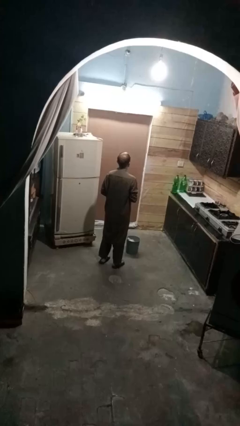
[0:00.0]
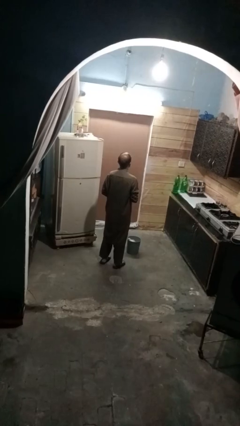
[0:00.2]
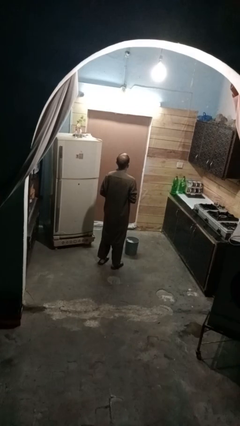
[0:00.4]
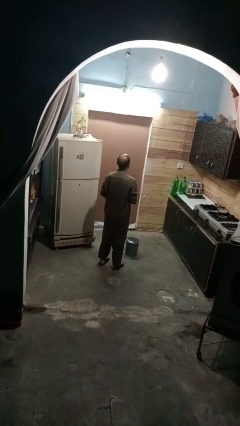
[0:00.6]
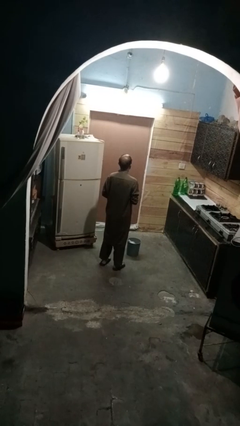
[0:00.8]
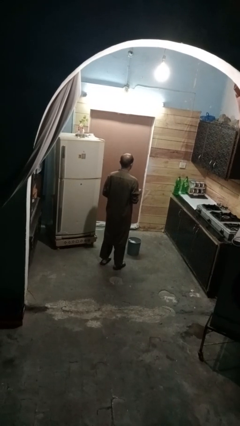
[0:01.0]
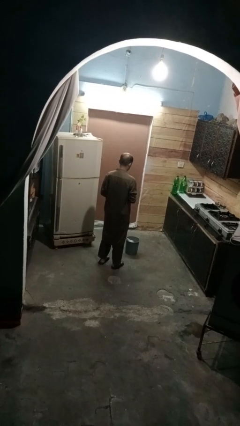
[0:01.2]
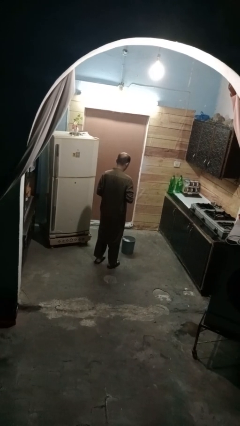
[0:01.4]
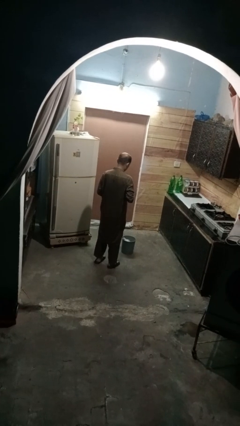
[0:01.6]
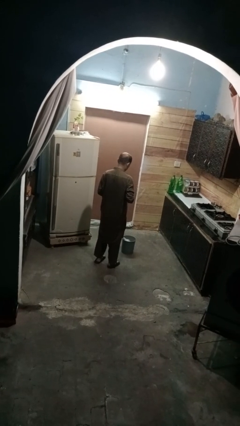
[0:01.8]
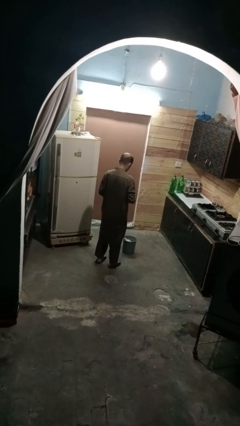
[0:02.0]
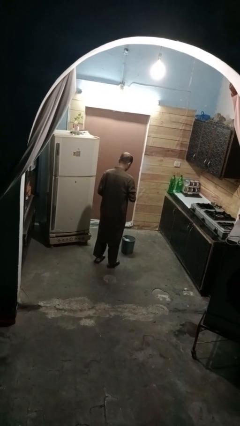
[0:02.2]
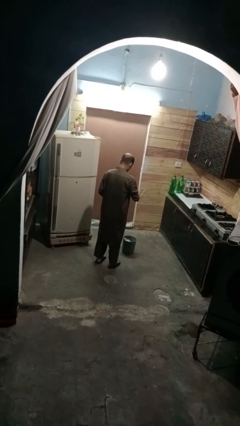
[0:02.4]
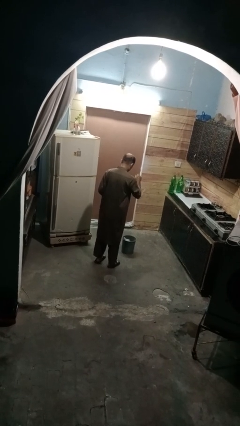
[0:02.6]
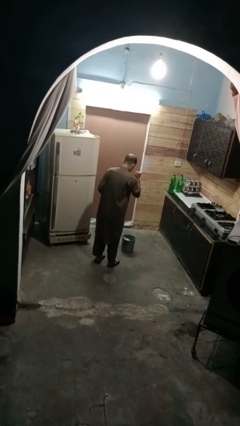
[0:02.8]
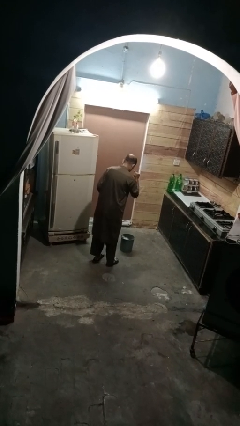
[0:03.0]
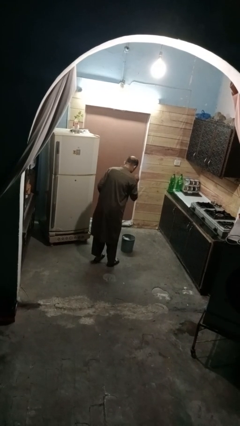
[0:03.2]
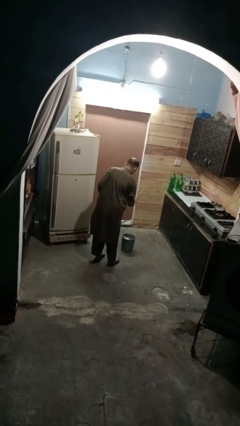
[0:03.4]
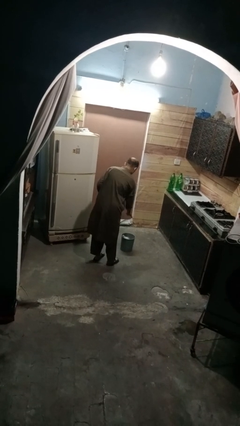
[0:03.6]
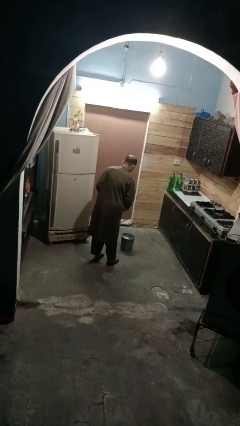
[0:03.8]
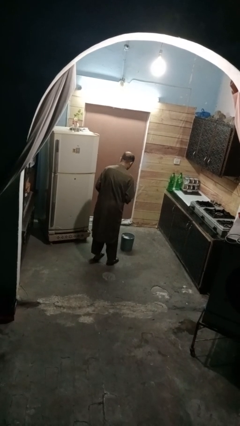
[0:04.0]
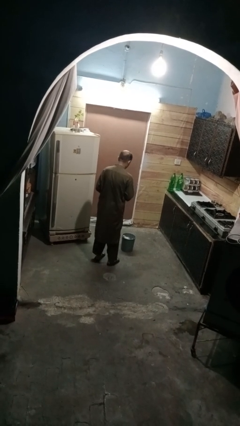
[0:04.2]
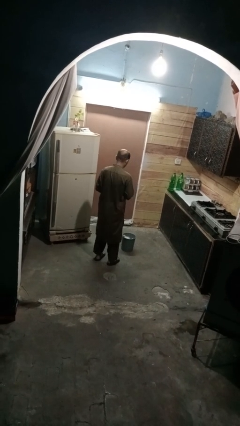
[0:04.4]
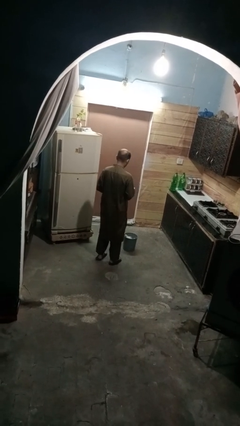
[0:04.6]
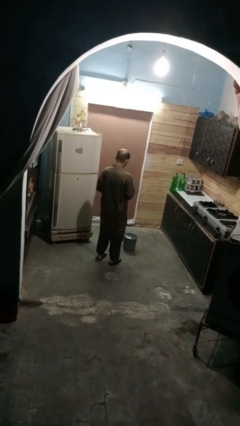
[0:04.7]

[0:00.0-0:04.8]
person discards trash

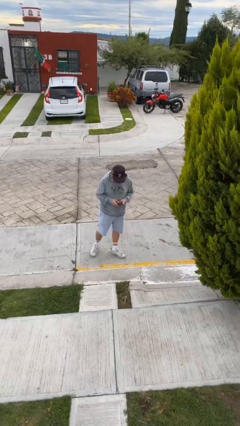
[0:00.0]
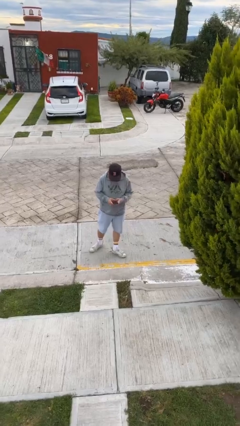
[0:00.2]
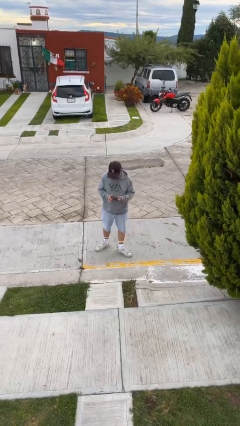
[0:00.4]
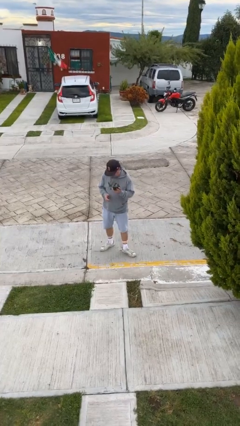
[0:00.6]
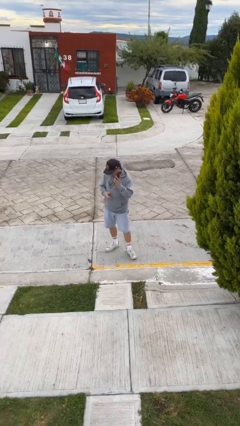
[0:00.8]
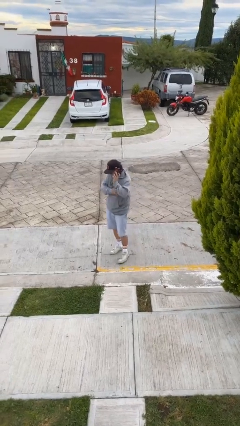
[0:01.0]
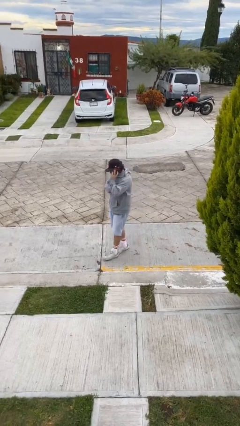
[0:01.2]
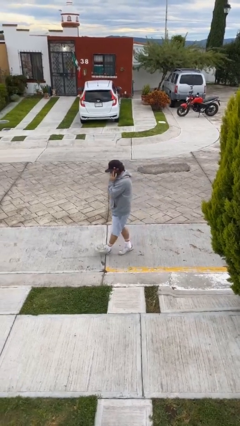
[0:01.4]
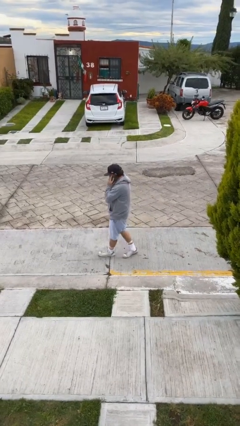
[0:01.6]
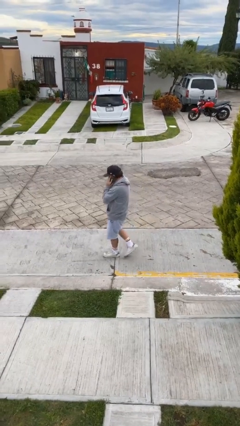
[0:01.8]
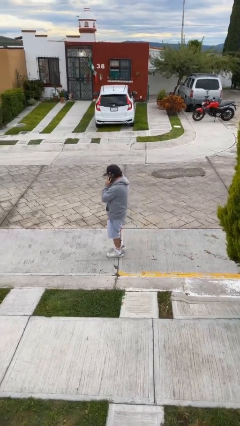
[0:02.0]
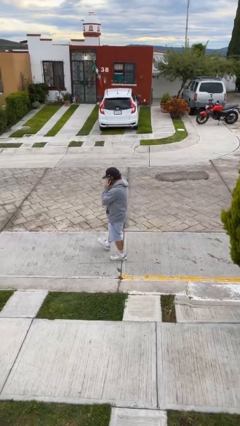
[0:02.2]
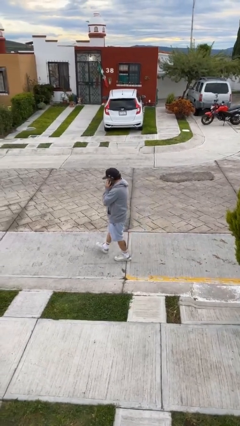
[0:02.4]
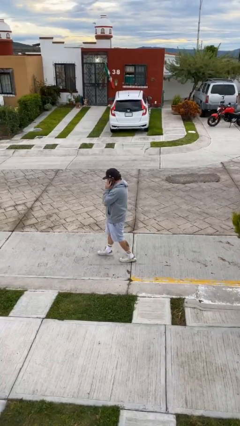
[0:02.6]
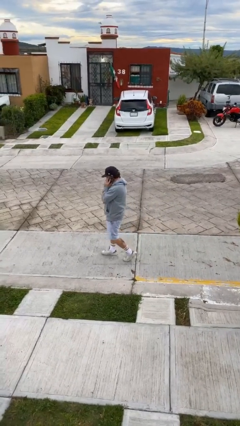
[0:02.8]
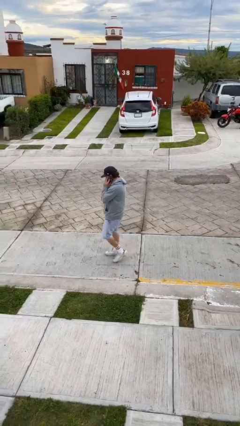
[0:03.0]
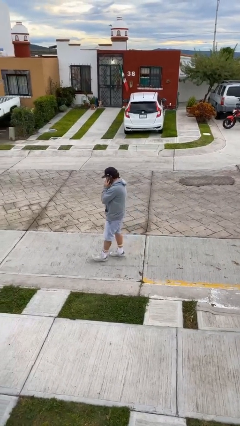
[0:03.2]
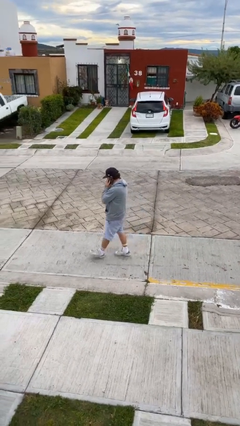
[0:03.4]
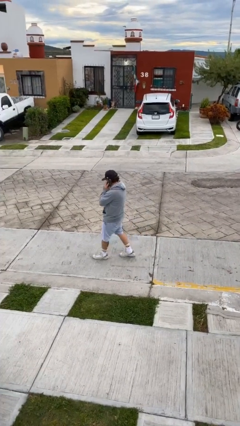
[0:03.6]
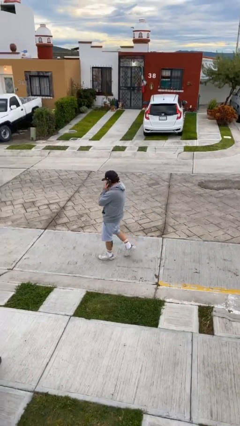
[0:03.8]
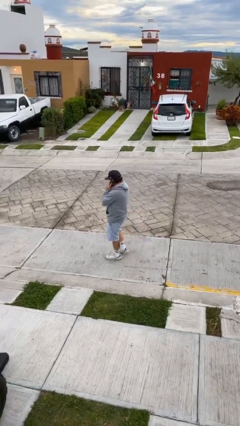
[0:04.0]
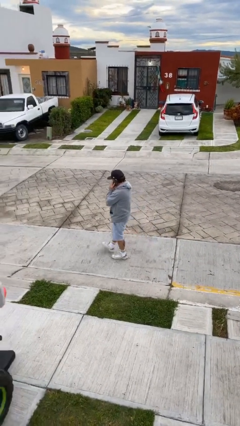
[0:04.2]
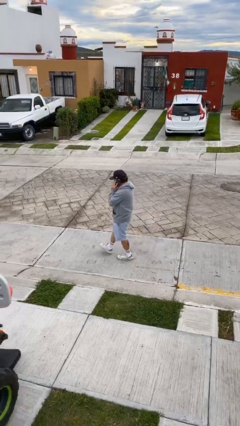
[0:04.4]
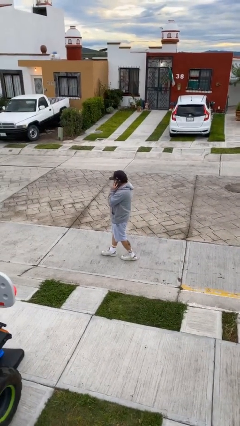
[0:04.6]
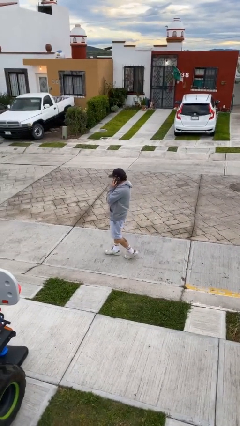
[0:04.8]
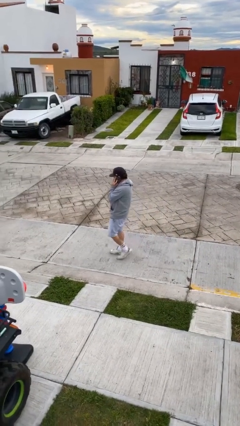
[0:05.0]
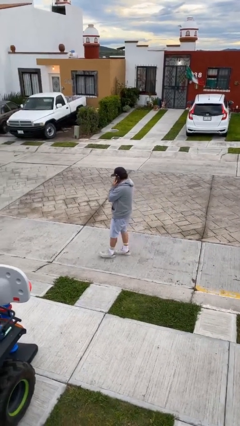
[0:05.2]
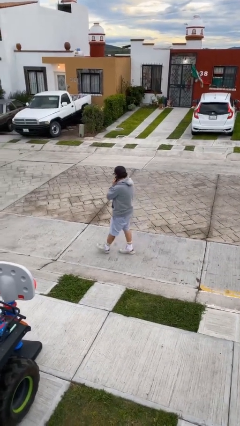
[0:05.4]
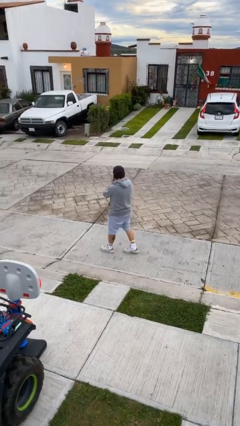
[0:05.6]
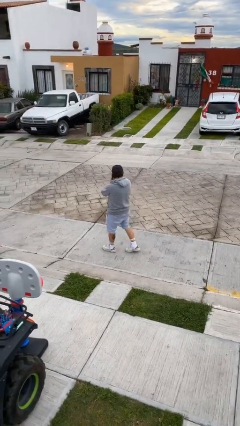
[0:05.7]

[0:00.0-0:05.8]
person talks on phone

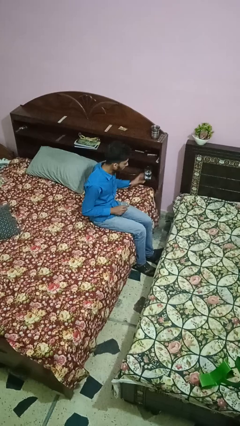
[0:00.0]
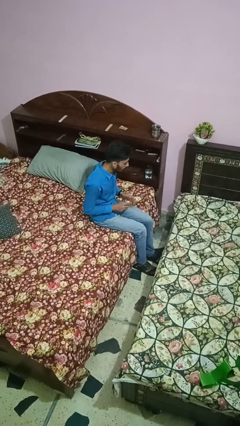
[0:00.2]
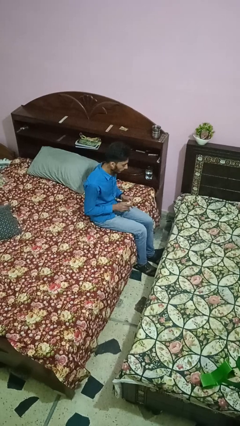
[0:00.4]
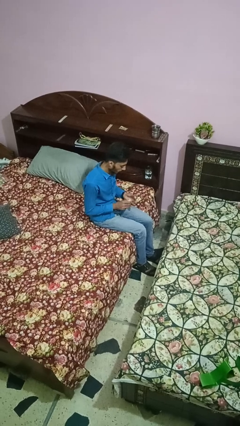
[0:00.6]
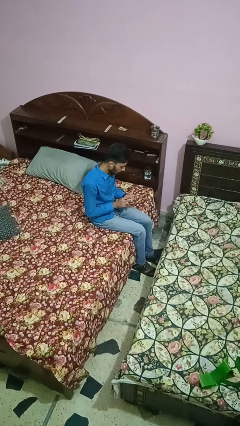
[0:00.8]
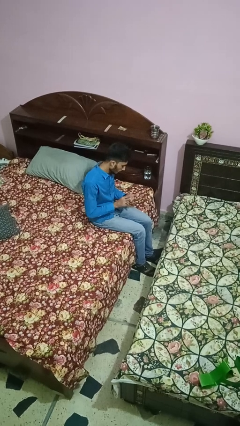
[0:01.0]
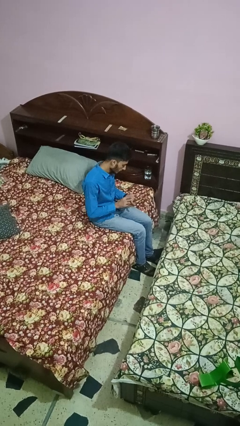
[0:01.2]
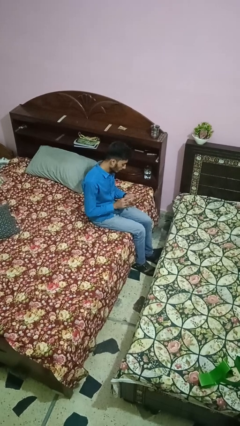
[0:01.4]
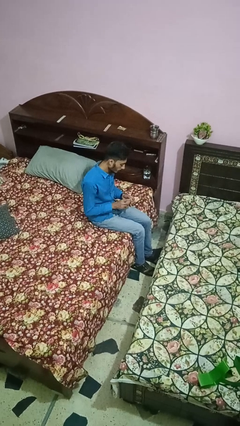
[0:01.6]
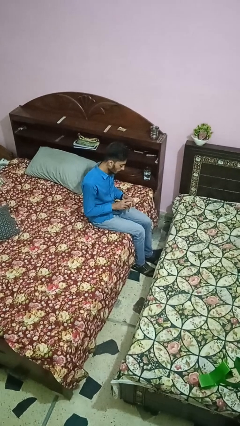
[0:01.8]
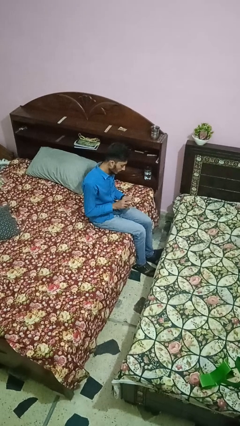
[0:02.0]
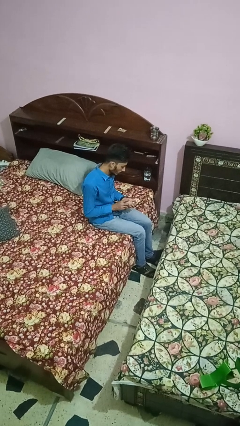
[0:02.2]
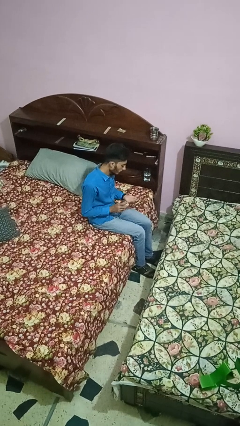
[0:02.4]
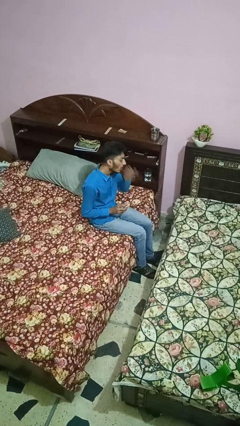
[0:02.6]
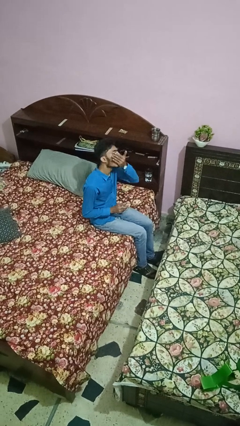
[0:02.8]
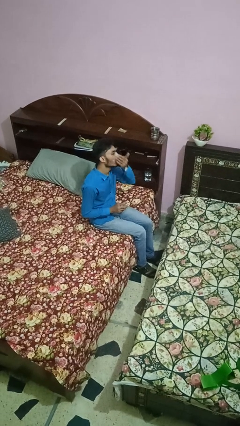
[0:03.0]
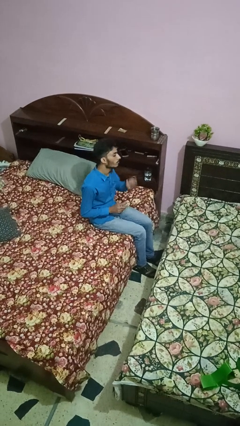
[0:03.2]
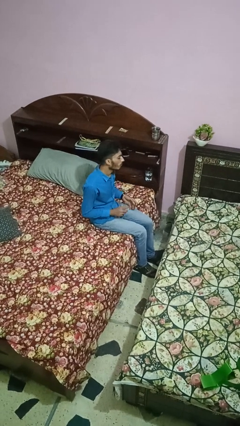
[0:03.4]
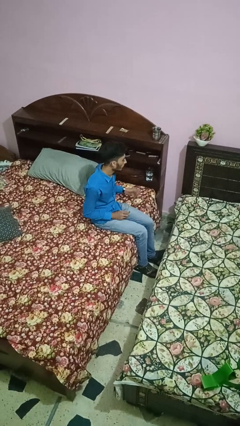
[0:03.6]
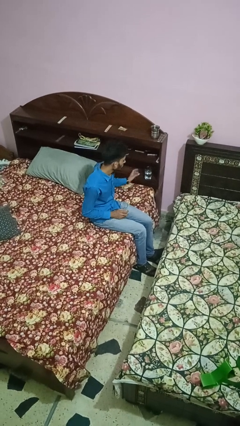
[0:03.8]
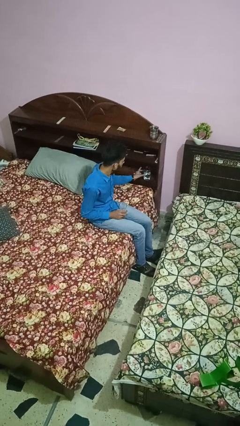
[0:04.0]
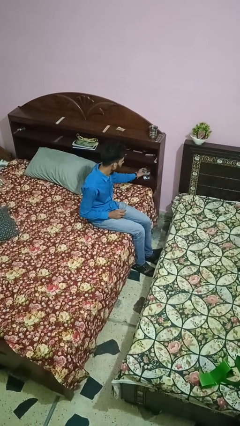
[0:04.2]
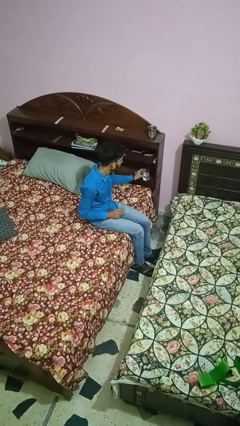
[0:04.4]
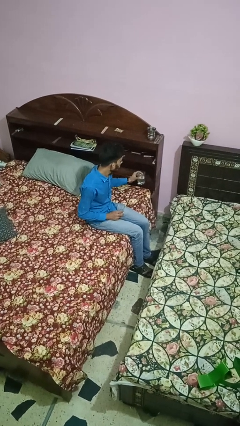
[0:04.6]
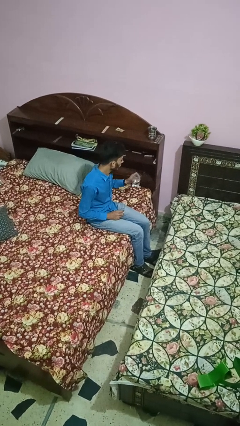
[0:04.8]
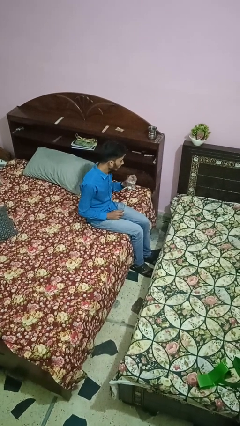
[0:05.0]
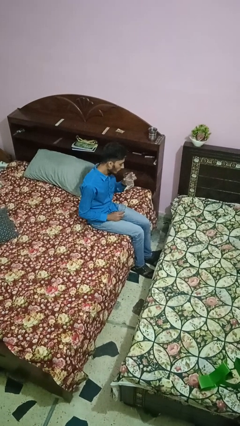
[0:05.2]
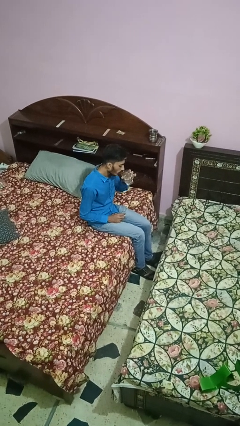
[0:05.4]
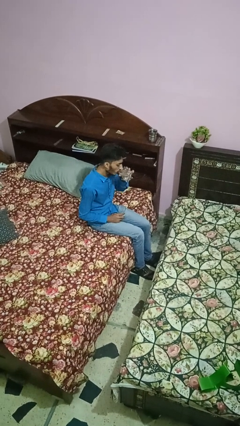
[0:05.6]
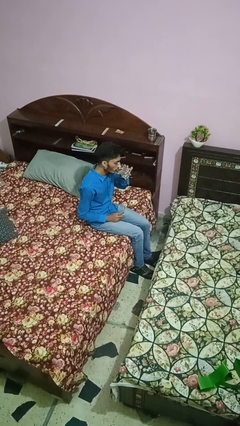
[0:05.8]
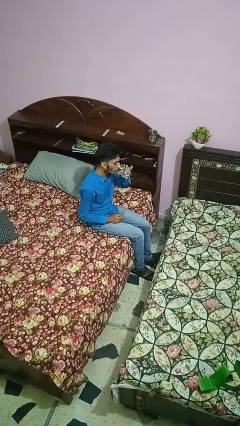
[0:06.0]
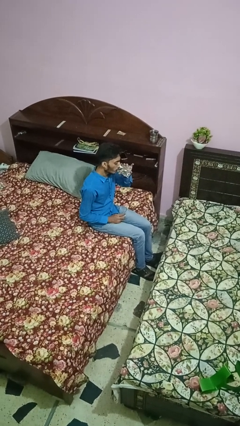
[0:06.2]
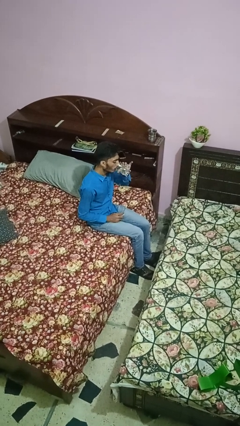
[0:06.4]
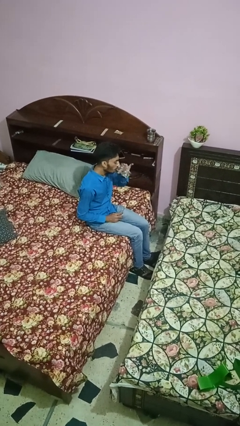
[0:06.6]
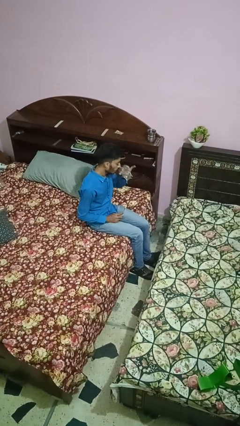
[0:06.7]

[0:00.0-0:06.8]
person takes medicine pills

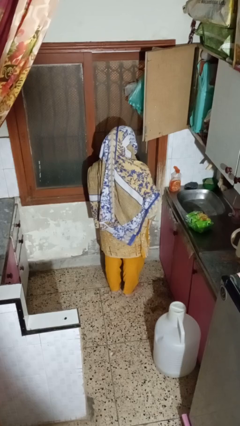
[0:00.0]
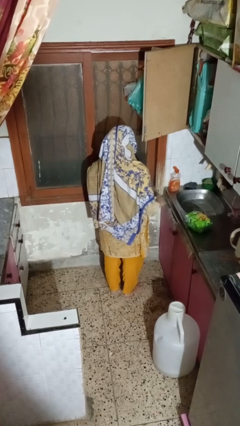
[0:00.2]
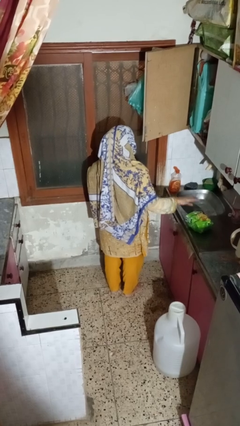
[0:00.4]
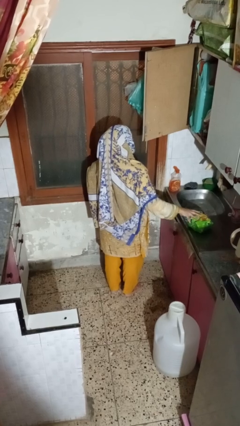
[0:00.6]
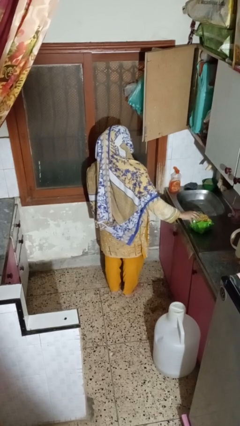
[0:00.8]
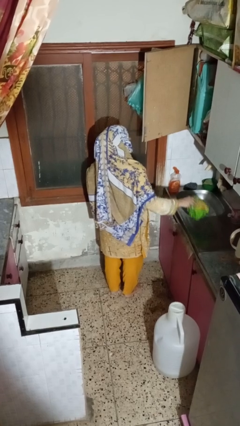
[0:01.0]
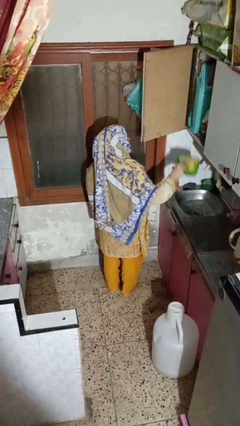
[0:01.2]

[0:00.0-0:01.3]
person puts object in cabinet
